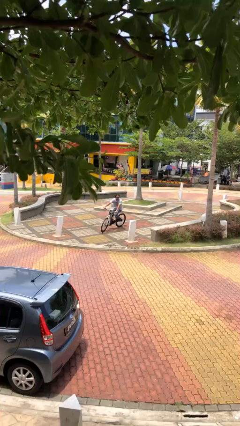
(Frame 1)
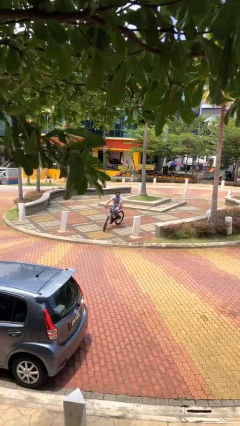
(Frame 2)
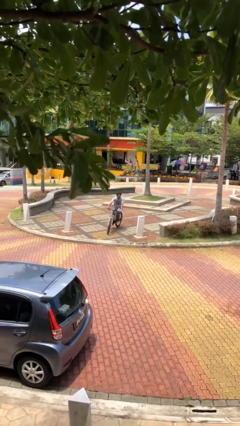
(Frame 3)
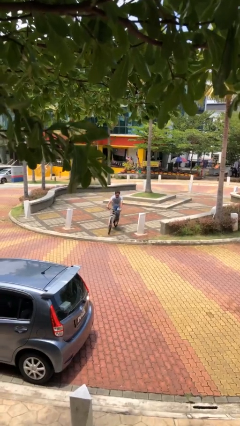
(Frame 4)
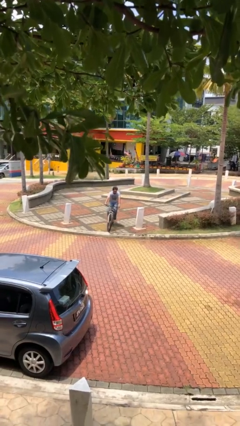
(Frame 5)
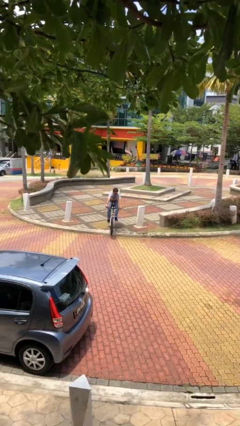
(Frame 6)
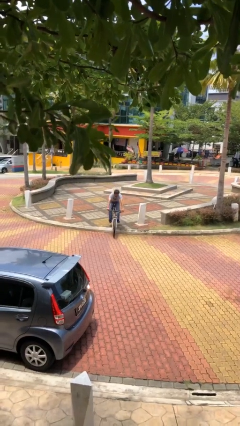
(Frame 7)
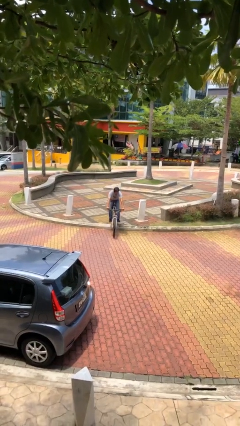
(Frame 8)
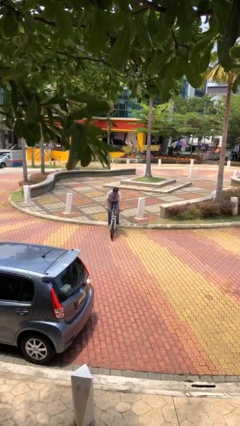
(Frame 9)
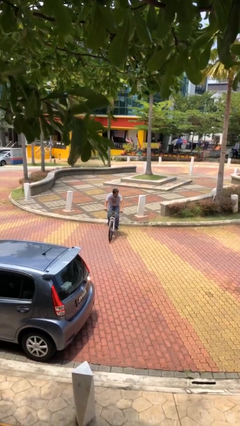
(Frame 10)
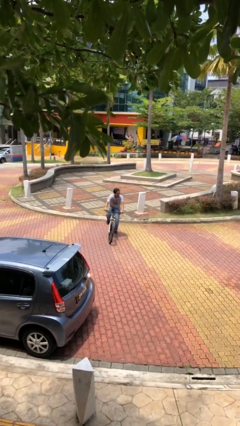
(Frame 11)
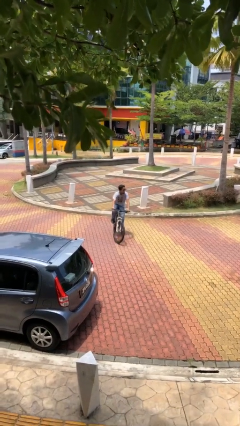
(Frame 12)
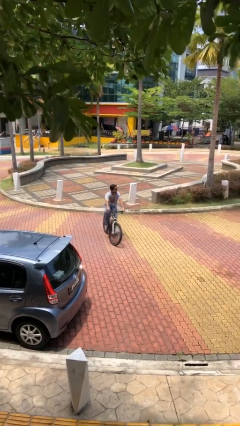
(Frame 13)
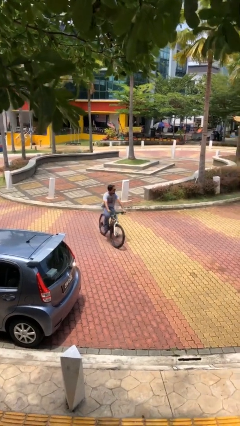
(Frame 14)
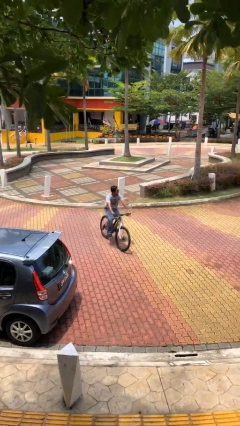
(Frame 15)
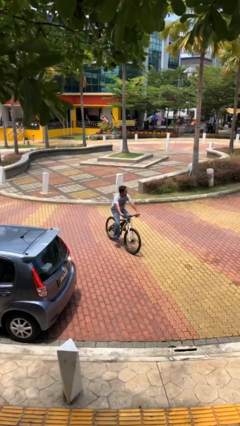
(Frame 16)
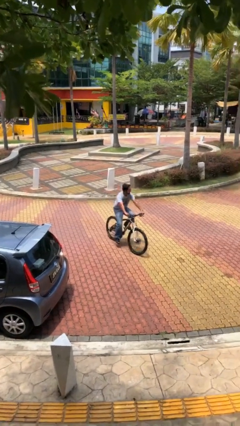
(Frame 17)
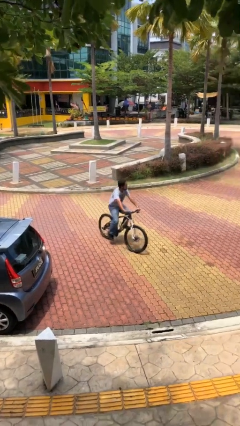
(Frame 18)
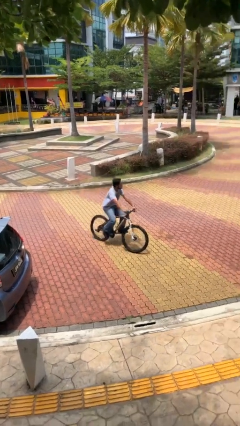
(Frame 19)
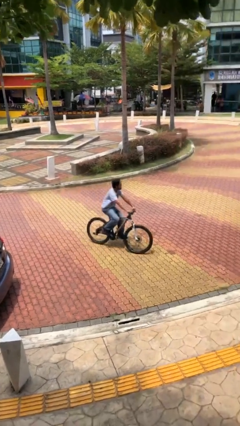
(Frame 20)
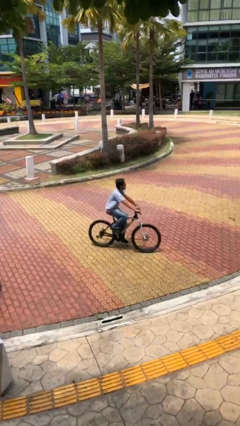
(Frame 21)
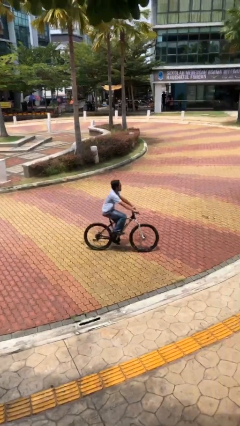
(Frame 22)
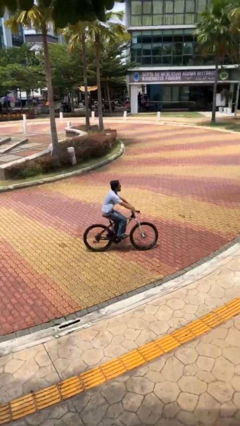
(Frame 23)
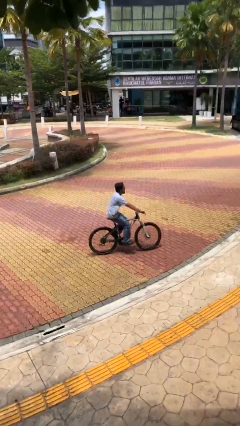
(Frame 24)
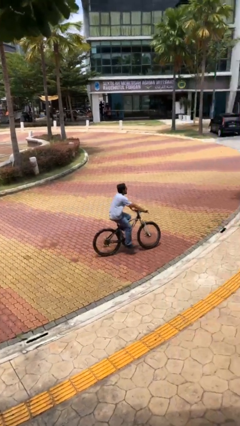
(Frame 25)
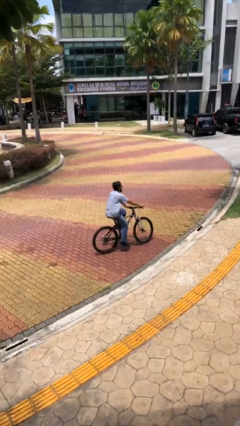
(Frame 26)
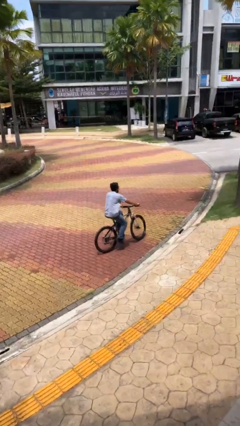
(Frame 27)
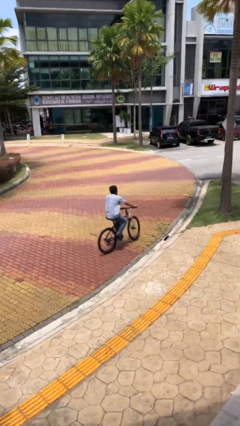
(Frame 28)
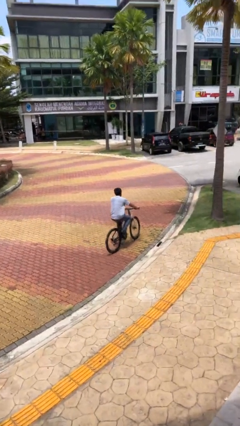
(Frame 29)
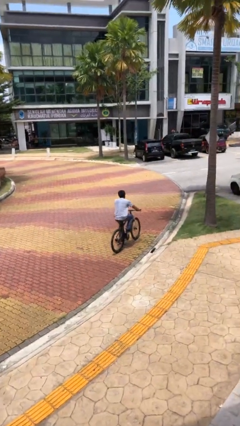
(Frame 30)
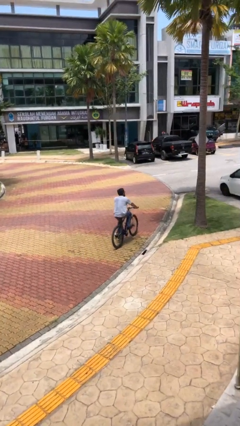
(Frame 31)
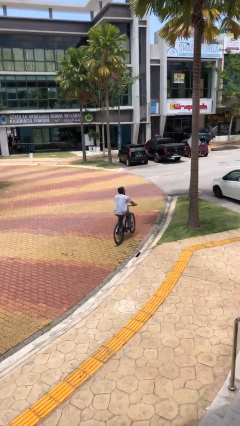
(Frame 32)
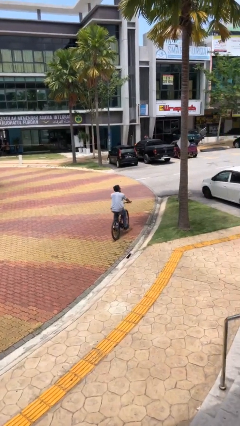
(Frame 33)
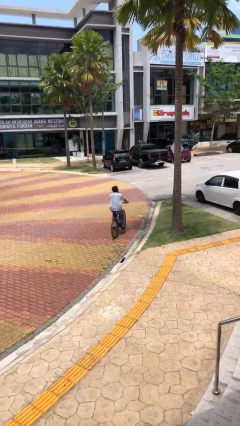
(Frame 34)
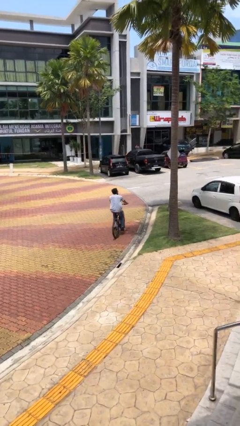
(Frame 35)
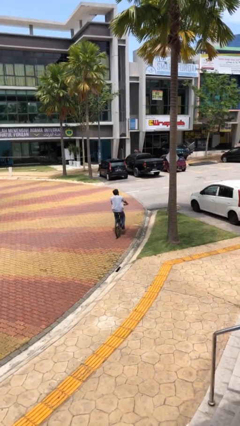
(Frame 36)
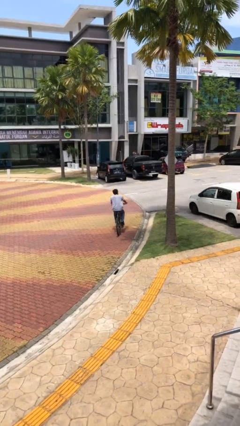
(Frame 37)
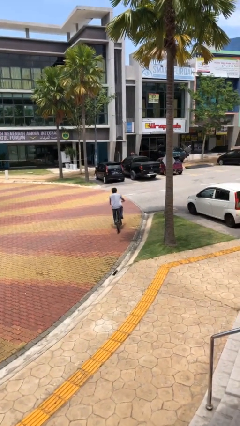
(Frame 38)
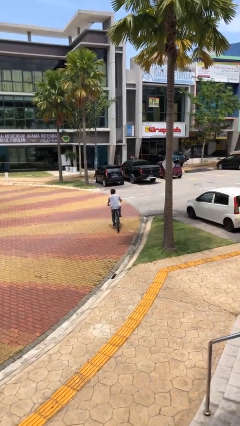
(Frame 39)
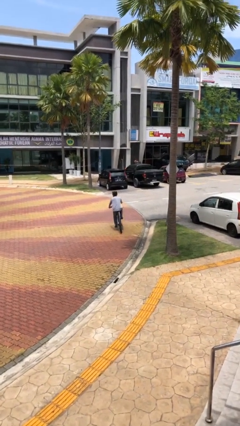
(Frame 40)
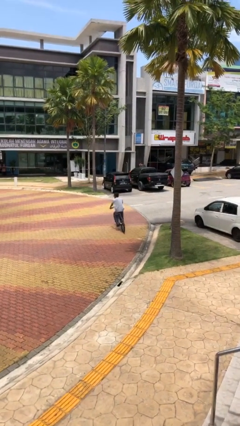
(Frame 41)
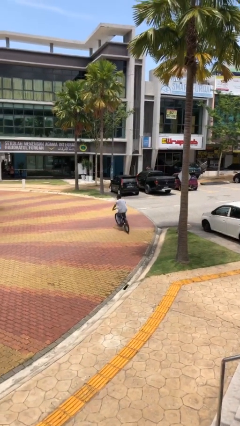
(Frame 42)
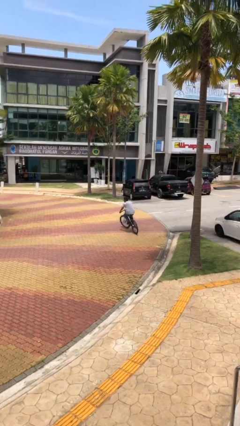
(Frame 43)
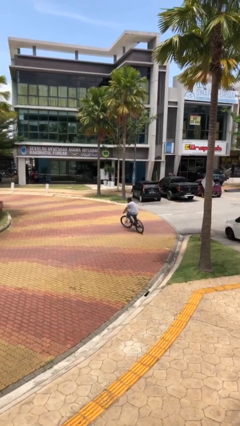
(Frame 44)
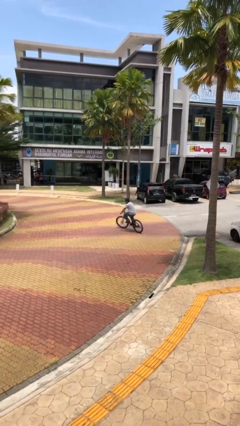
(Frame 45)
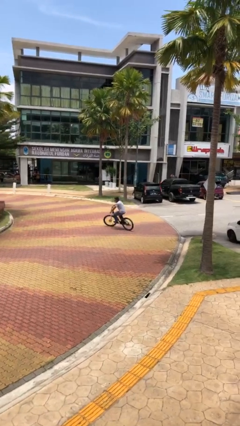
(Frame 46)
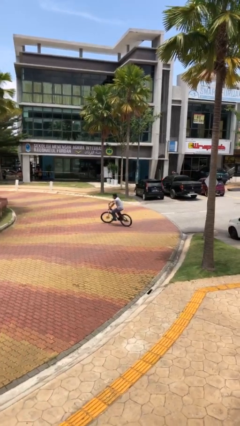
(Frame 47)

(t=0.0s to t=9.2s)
person rides bicycle

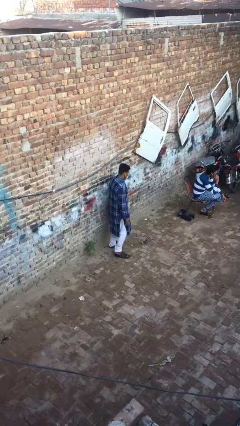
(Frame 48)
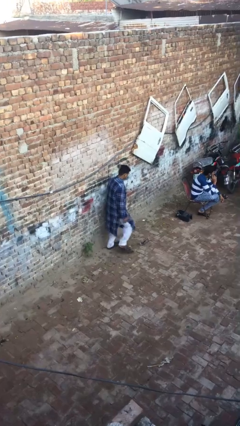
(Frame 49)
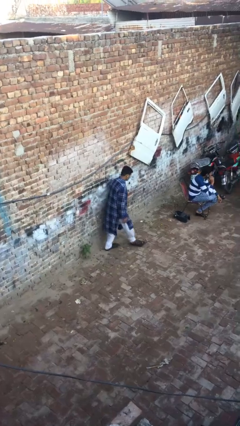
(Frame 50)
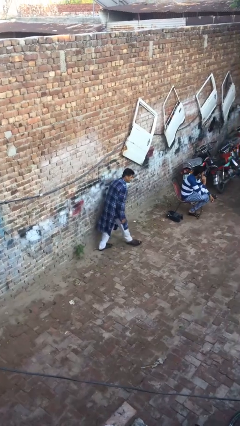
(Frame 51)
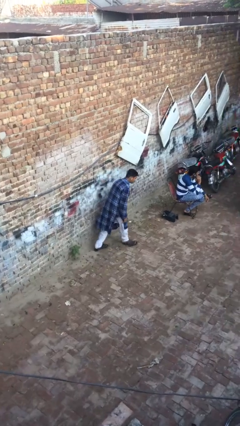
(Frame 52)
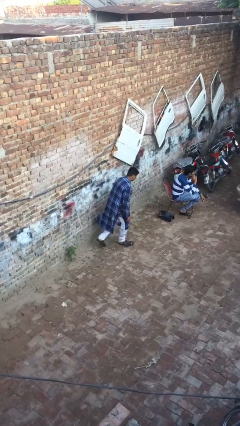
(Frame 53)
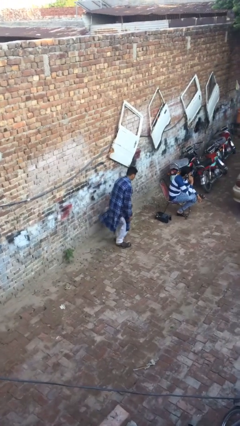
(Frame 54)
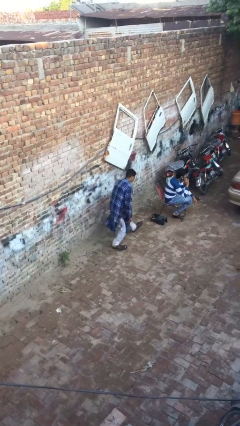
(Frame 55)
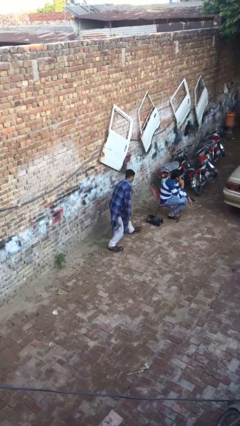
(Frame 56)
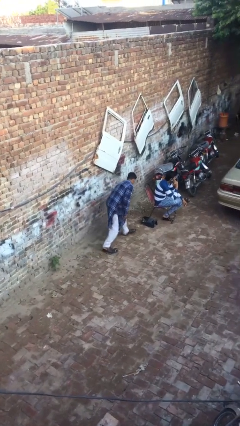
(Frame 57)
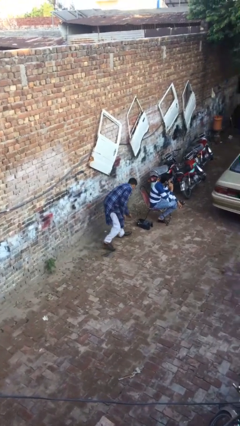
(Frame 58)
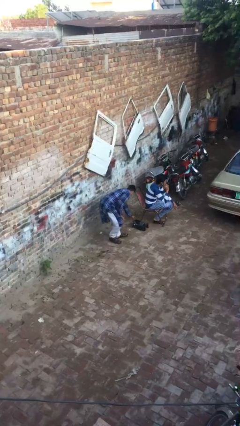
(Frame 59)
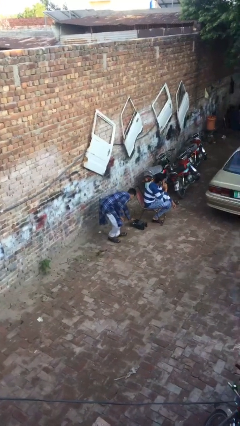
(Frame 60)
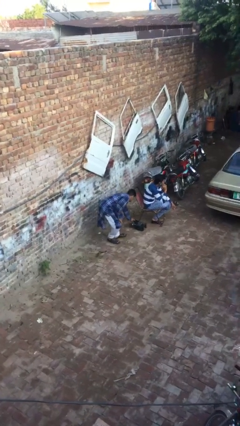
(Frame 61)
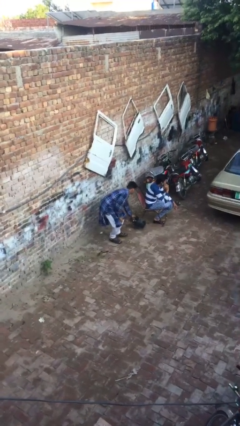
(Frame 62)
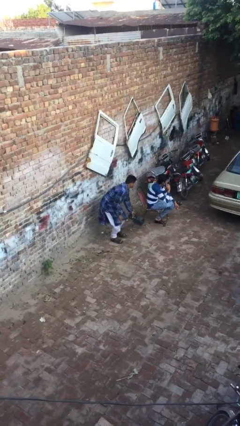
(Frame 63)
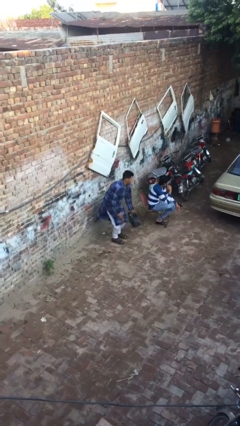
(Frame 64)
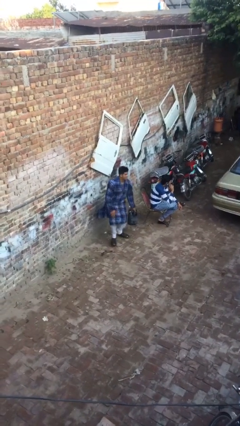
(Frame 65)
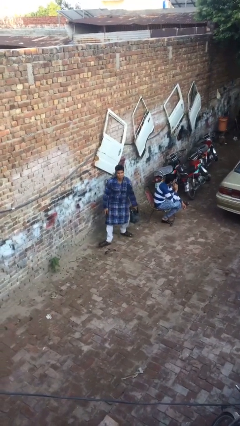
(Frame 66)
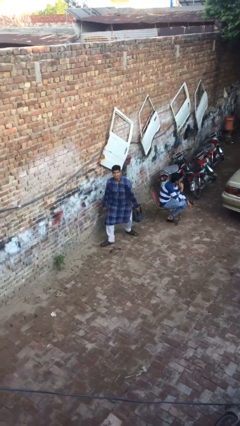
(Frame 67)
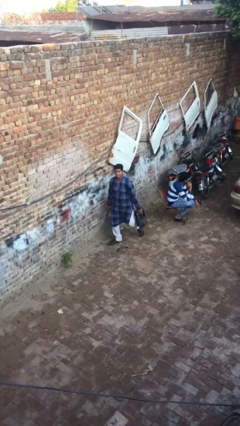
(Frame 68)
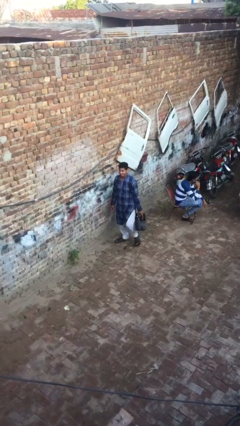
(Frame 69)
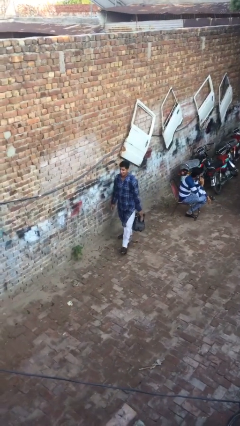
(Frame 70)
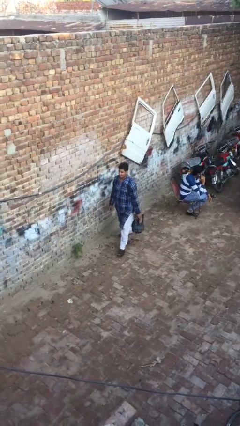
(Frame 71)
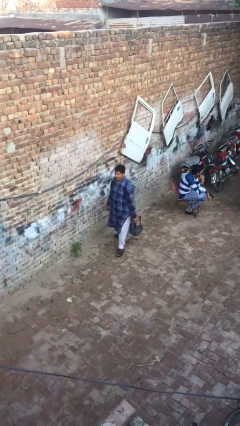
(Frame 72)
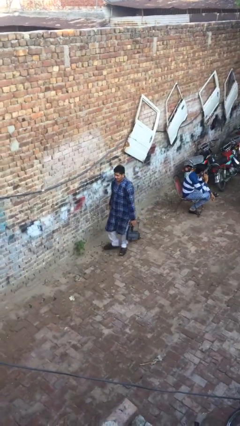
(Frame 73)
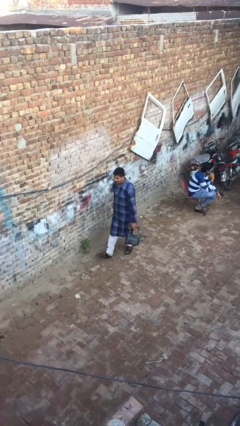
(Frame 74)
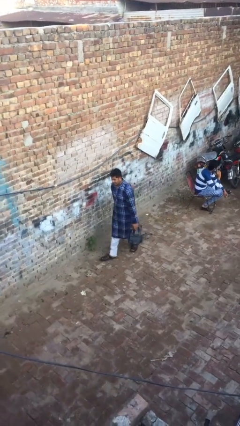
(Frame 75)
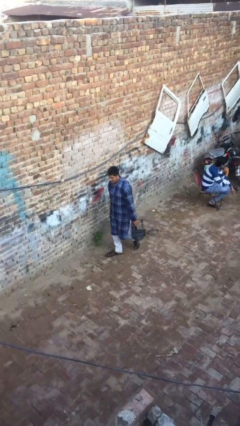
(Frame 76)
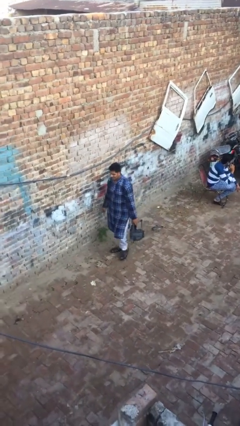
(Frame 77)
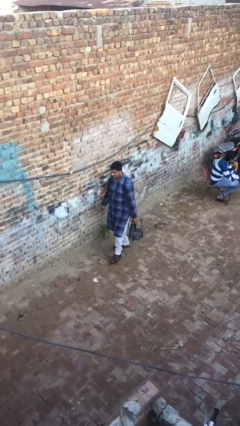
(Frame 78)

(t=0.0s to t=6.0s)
person steals object from person

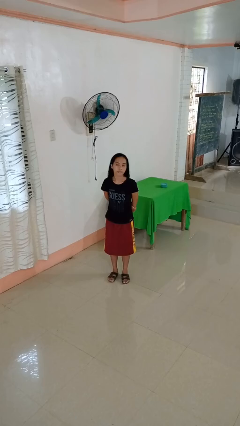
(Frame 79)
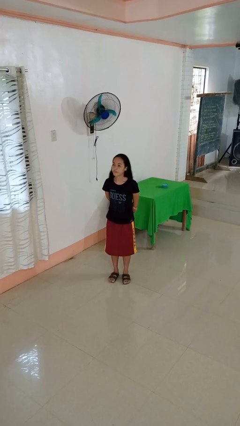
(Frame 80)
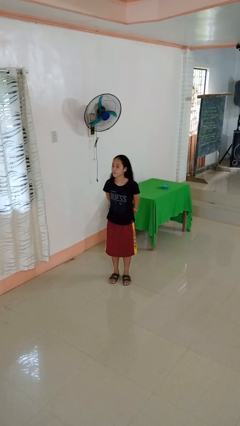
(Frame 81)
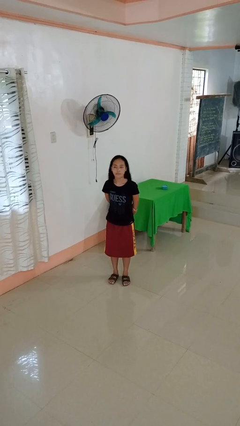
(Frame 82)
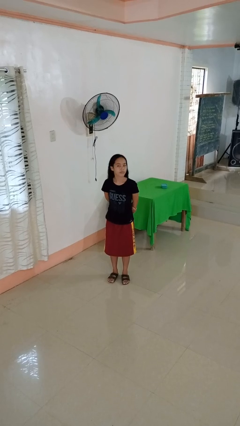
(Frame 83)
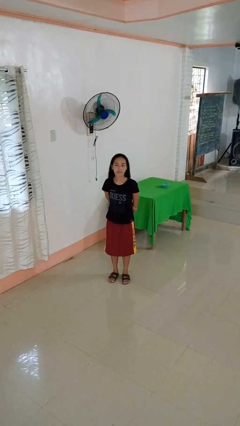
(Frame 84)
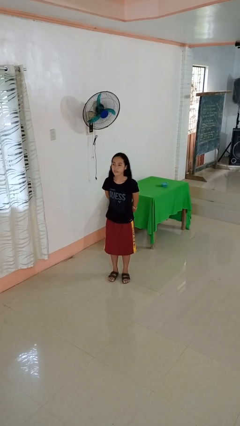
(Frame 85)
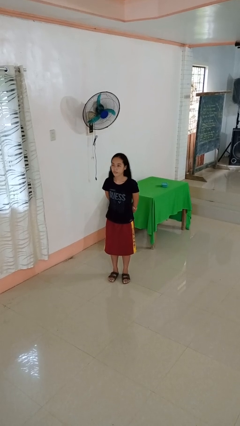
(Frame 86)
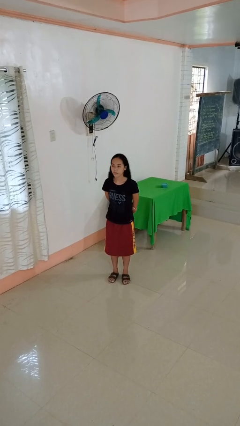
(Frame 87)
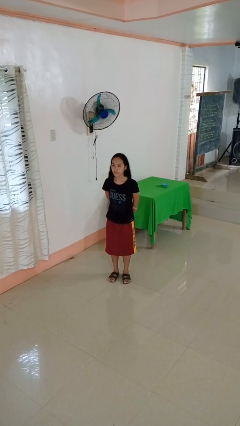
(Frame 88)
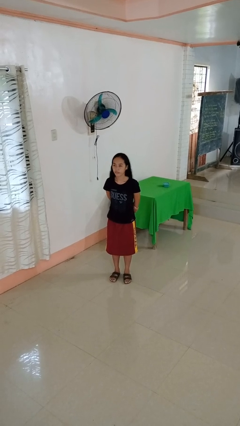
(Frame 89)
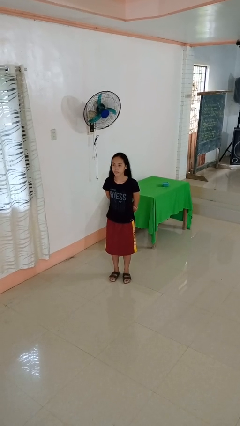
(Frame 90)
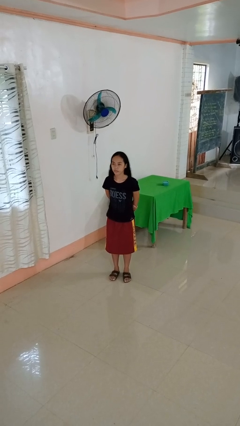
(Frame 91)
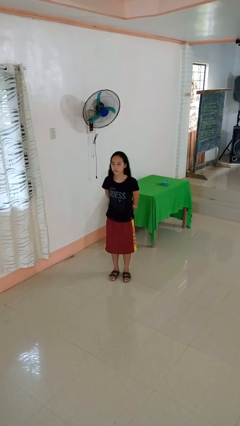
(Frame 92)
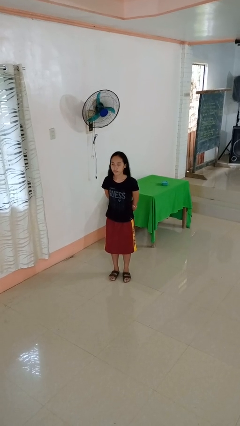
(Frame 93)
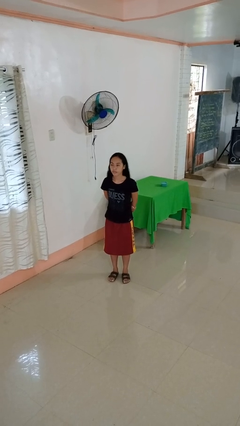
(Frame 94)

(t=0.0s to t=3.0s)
person shakes head
